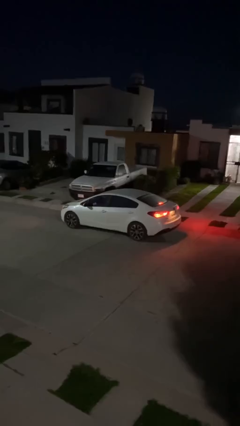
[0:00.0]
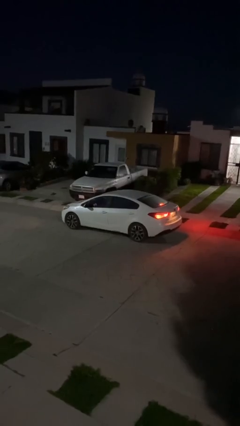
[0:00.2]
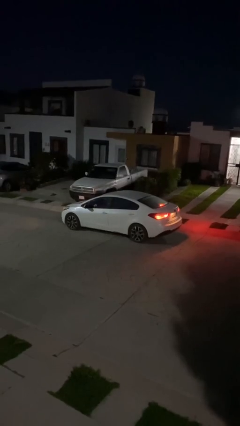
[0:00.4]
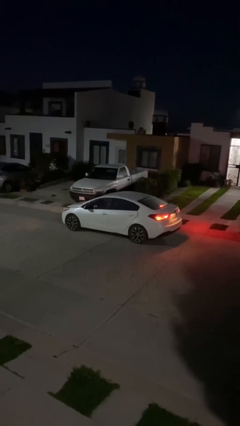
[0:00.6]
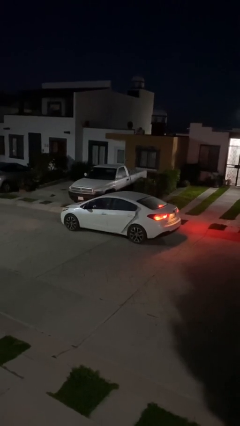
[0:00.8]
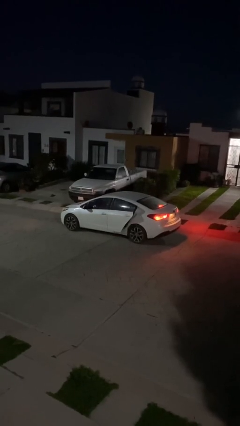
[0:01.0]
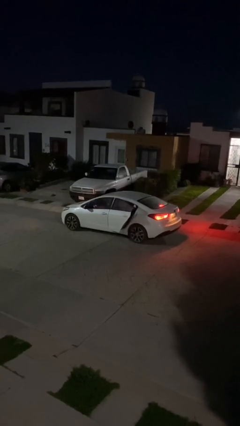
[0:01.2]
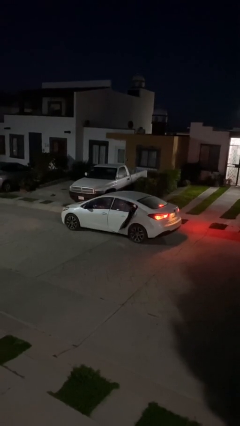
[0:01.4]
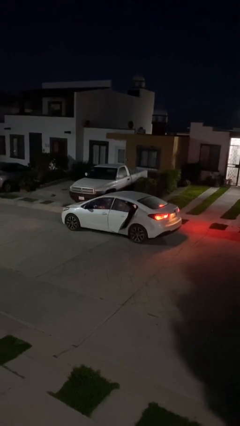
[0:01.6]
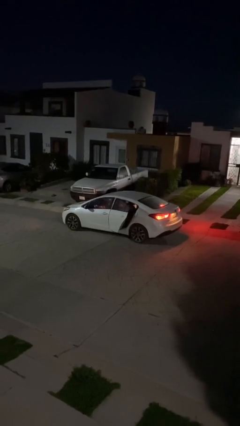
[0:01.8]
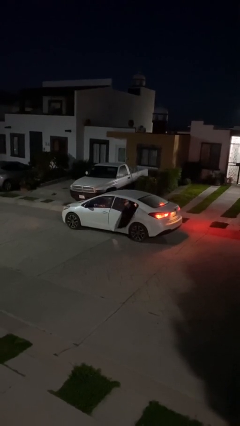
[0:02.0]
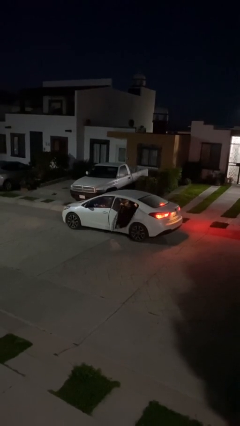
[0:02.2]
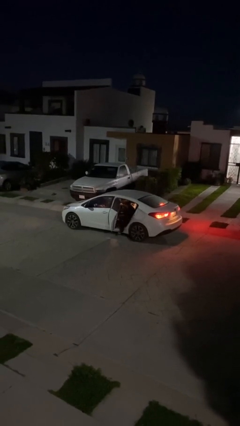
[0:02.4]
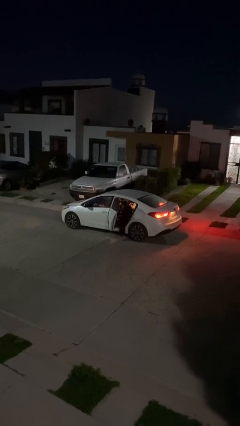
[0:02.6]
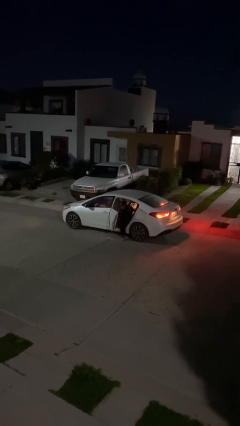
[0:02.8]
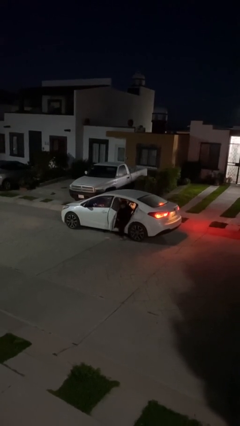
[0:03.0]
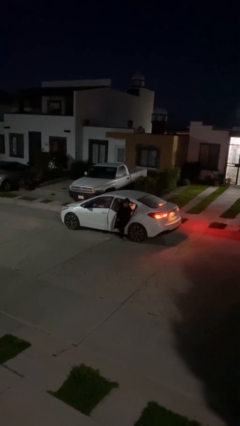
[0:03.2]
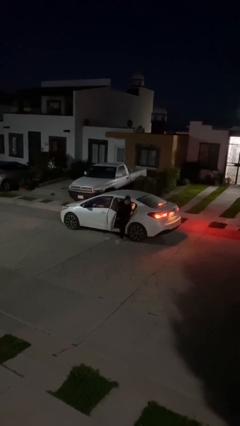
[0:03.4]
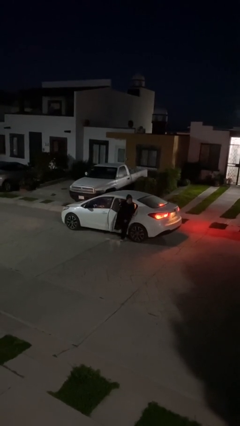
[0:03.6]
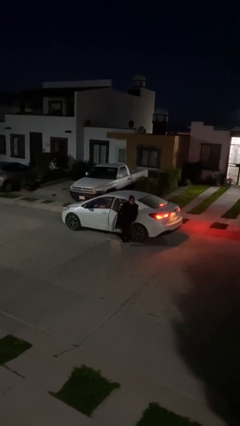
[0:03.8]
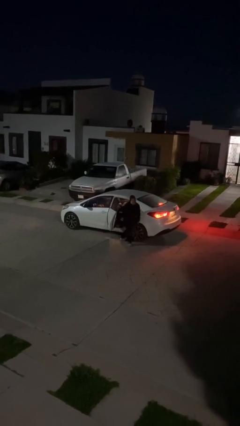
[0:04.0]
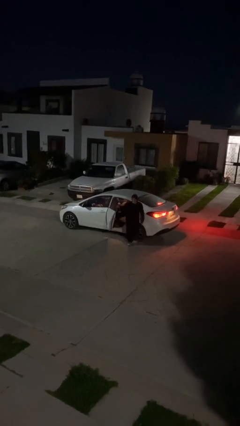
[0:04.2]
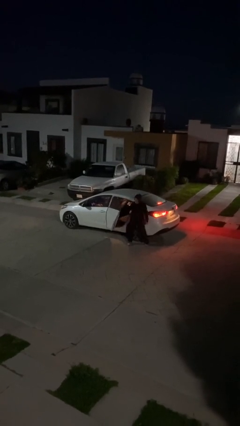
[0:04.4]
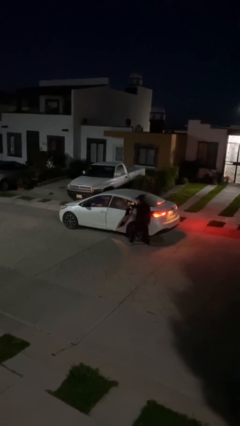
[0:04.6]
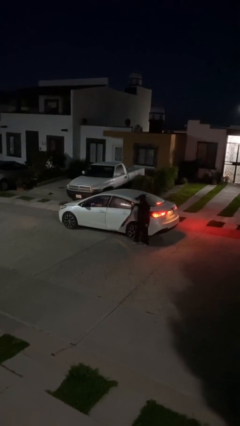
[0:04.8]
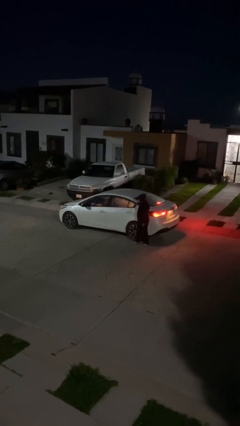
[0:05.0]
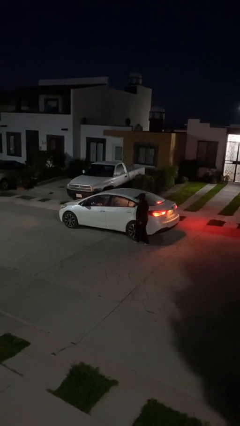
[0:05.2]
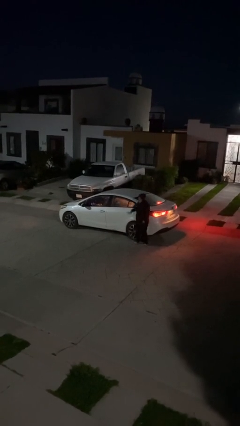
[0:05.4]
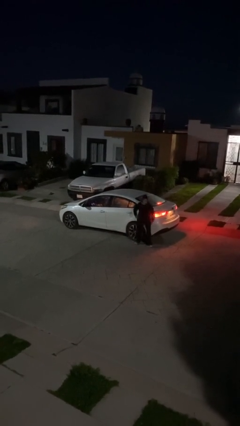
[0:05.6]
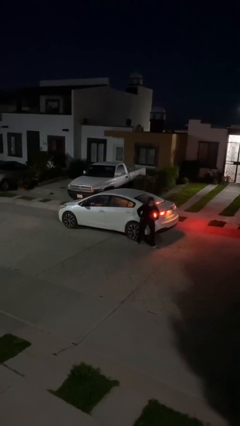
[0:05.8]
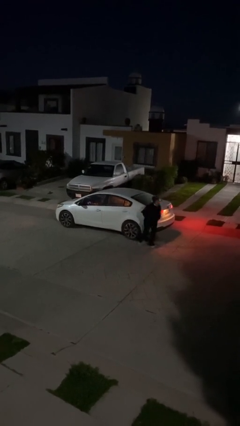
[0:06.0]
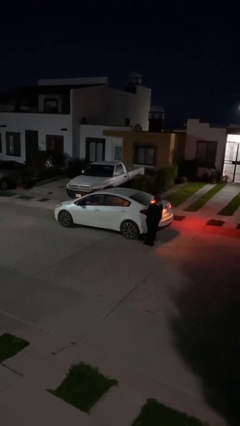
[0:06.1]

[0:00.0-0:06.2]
car drops off person

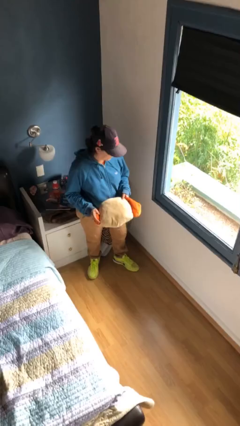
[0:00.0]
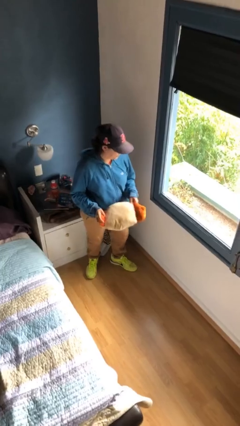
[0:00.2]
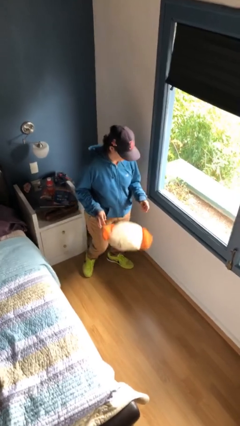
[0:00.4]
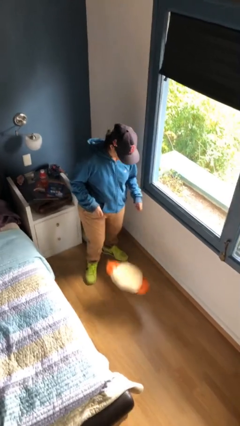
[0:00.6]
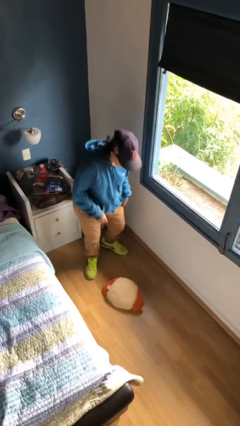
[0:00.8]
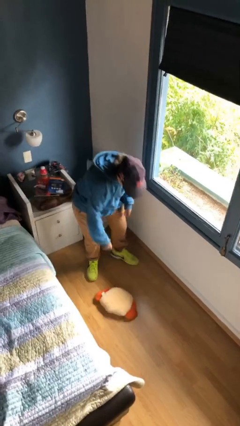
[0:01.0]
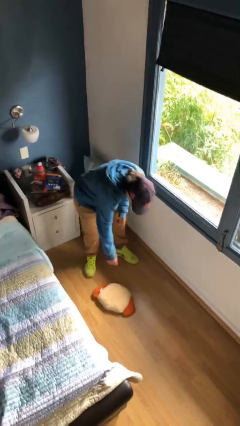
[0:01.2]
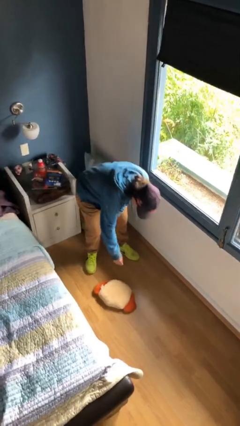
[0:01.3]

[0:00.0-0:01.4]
person drops object

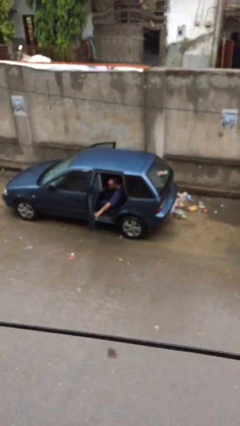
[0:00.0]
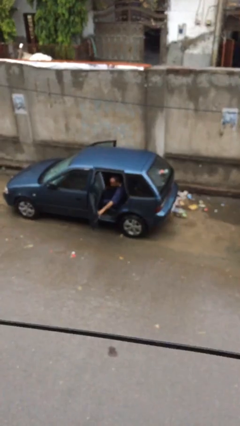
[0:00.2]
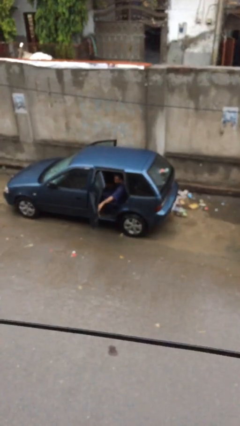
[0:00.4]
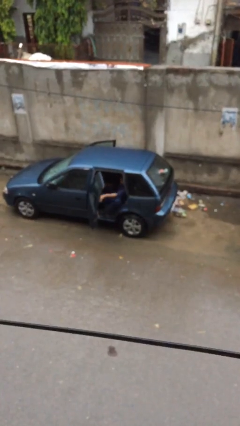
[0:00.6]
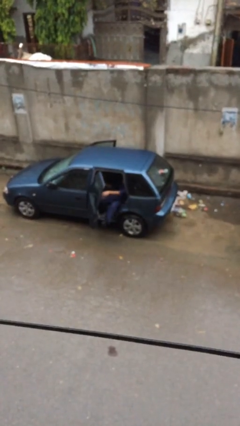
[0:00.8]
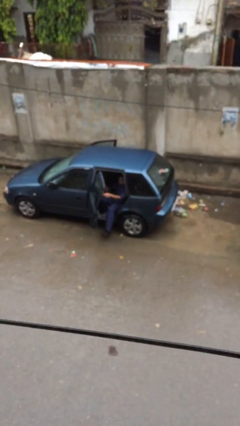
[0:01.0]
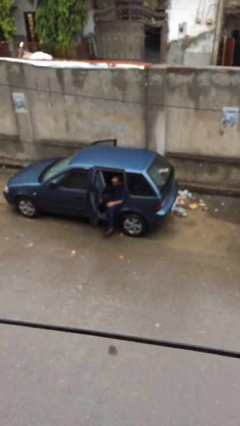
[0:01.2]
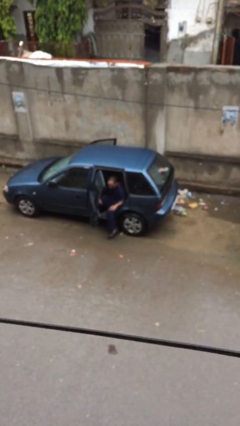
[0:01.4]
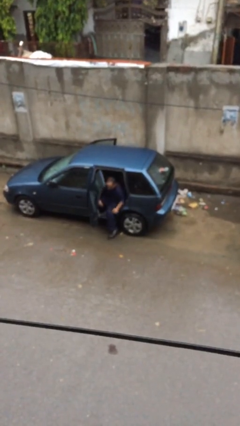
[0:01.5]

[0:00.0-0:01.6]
person exits car

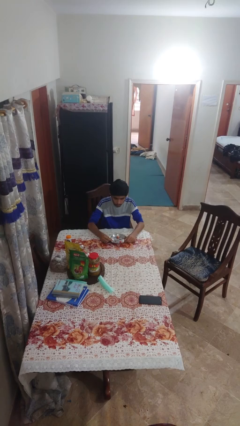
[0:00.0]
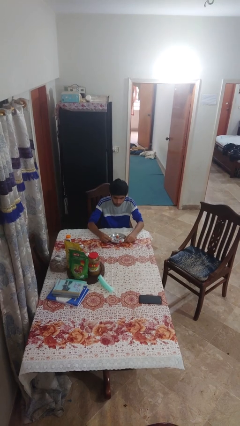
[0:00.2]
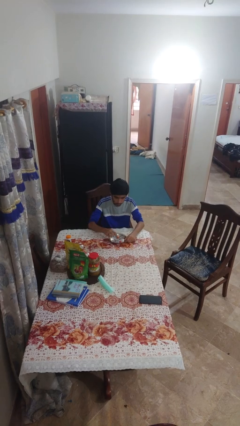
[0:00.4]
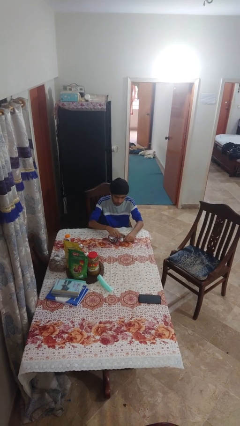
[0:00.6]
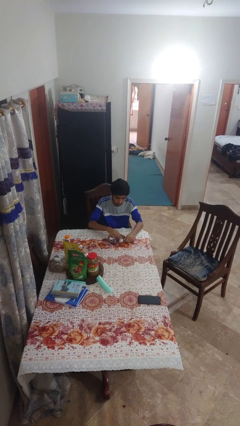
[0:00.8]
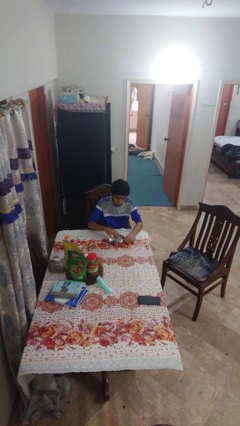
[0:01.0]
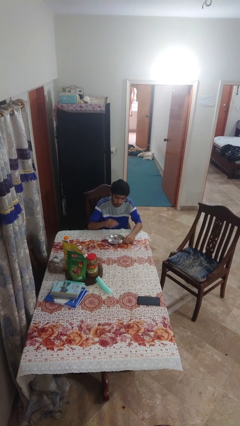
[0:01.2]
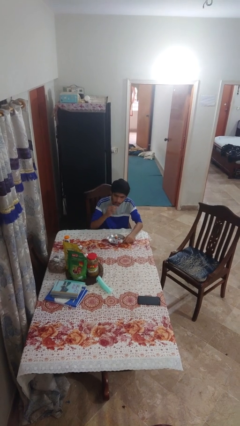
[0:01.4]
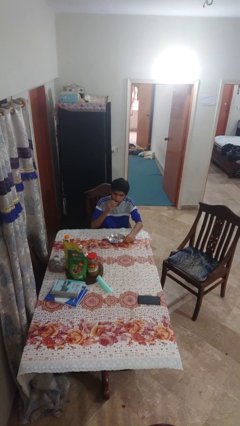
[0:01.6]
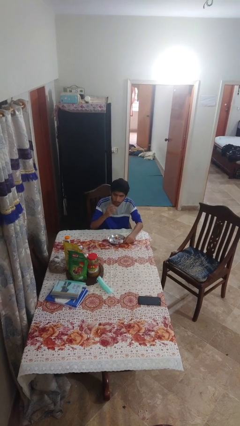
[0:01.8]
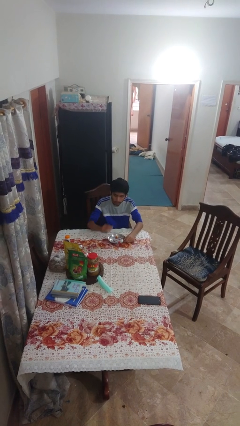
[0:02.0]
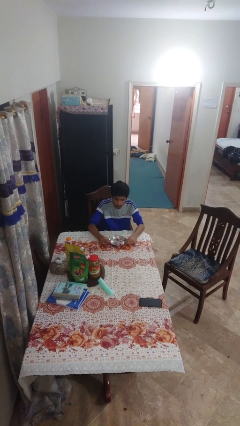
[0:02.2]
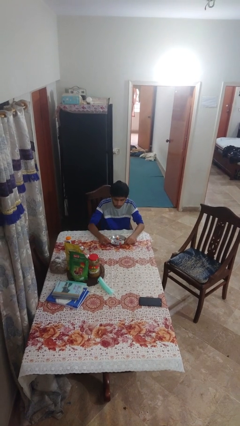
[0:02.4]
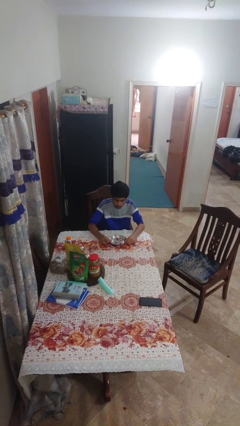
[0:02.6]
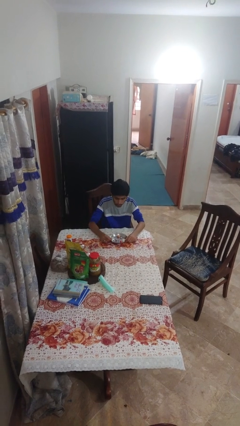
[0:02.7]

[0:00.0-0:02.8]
person eats with hands

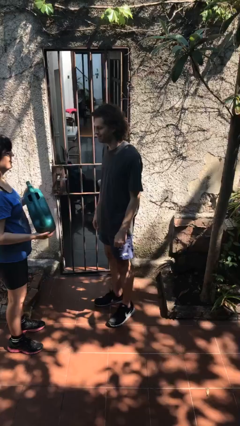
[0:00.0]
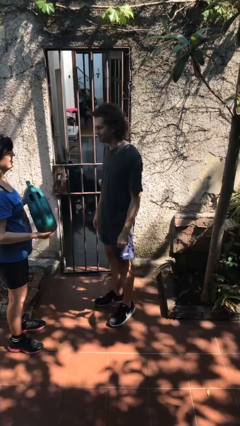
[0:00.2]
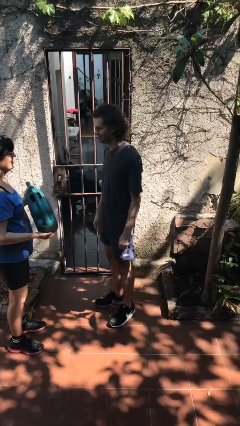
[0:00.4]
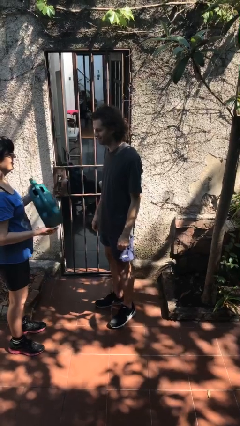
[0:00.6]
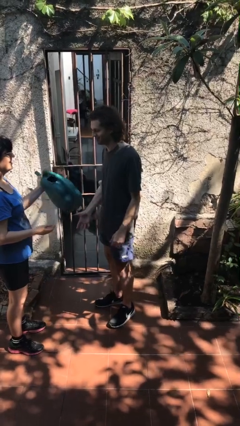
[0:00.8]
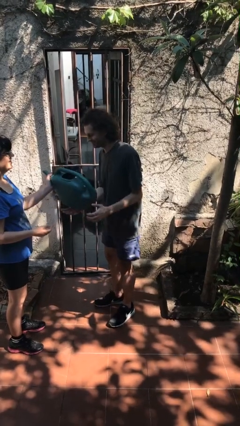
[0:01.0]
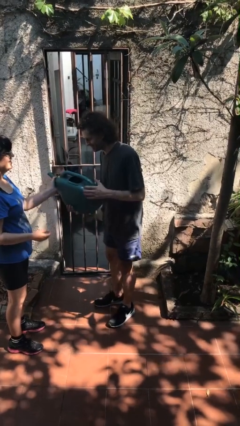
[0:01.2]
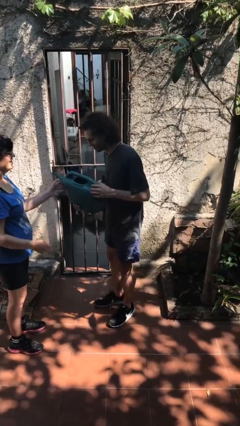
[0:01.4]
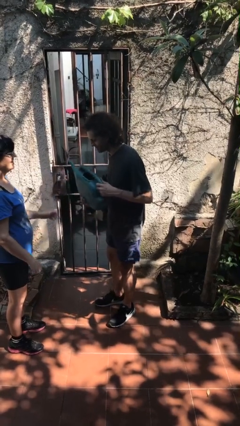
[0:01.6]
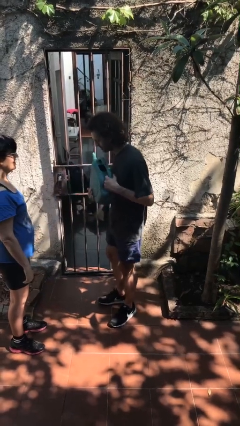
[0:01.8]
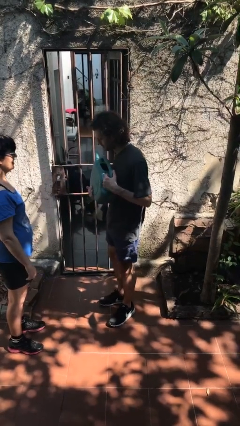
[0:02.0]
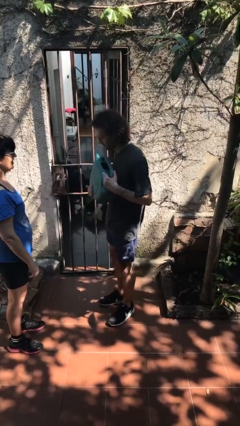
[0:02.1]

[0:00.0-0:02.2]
person transfers object to person

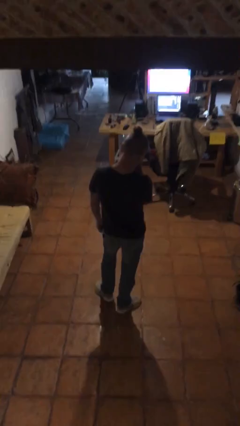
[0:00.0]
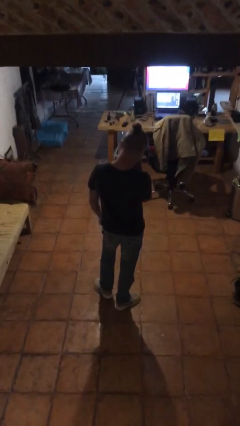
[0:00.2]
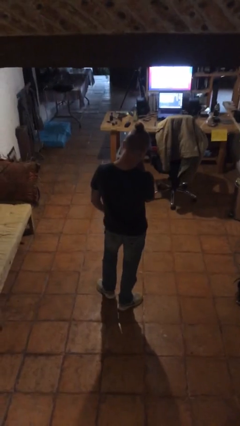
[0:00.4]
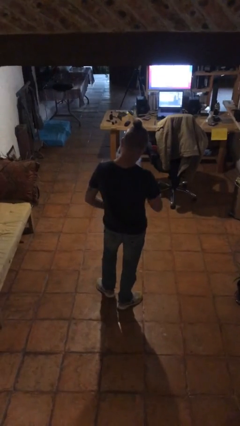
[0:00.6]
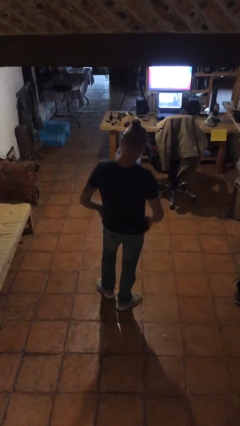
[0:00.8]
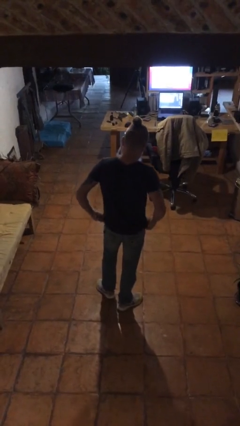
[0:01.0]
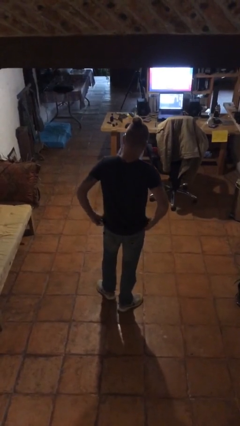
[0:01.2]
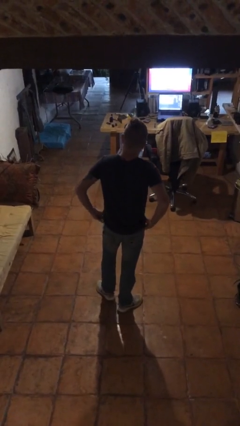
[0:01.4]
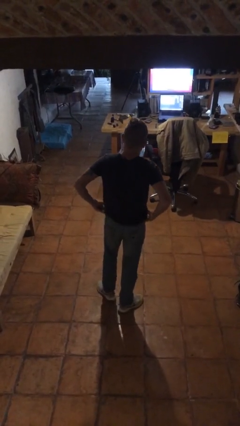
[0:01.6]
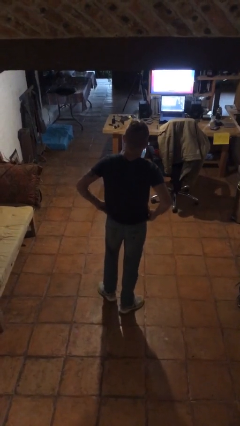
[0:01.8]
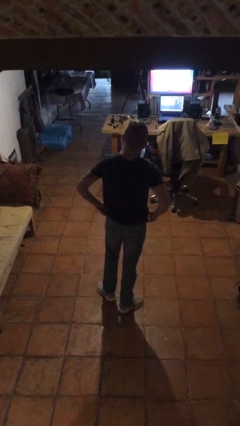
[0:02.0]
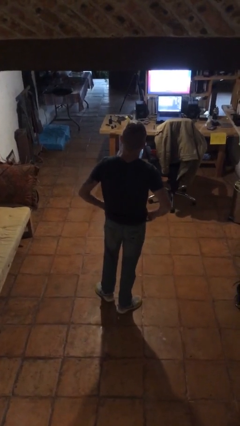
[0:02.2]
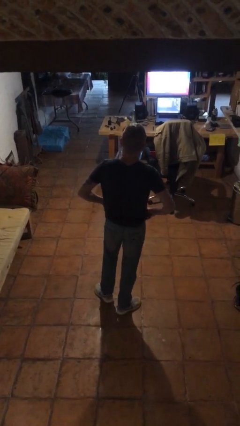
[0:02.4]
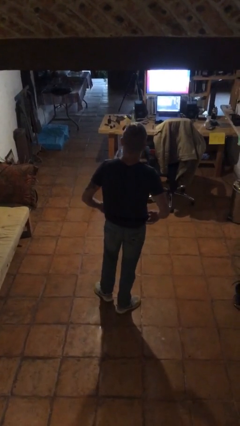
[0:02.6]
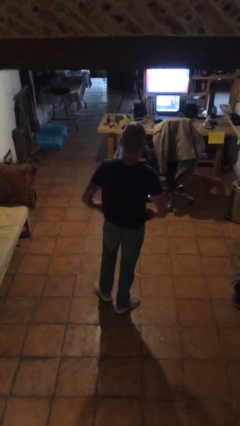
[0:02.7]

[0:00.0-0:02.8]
person hikes up pants

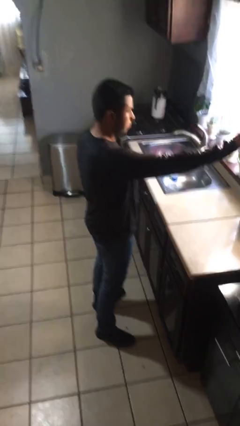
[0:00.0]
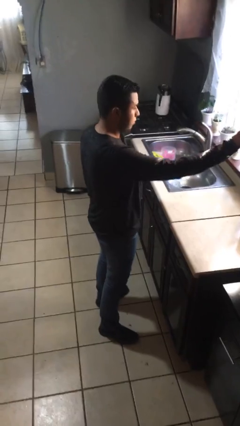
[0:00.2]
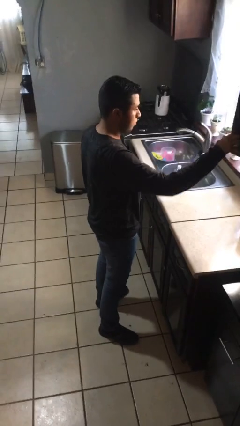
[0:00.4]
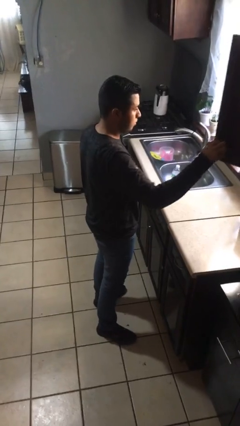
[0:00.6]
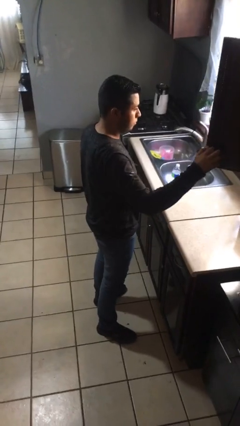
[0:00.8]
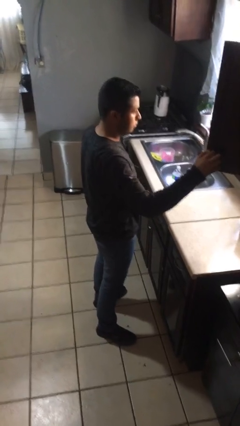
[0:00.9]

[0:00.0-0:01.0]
person opens cabinet
